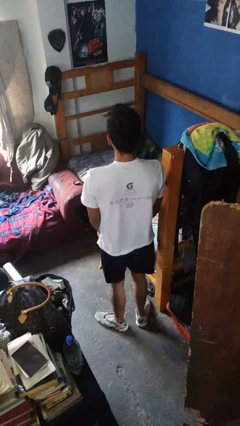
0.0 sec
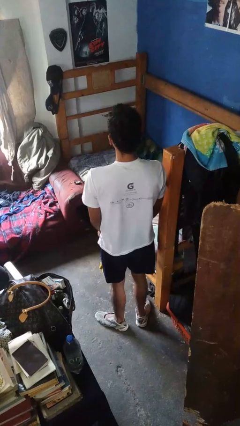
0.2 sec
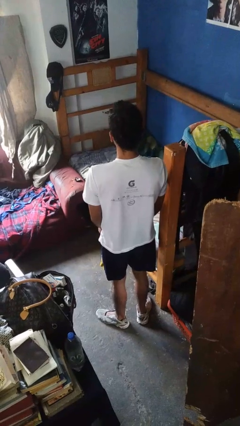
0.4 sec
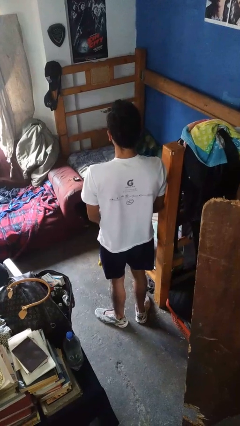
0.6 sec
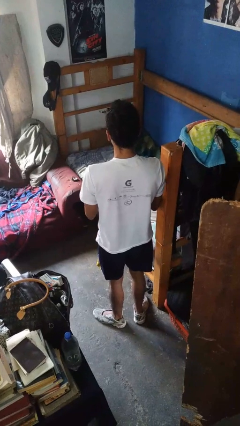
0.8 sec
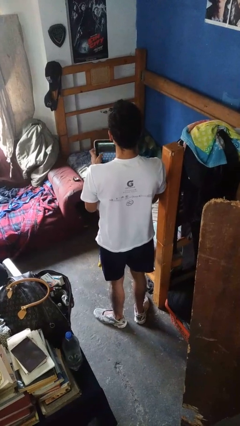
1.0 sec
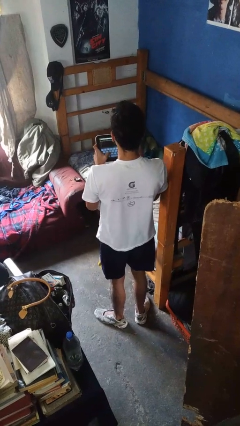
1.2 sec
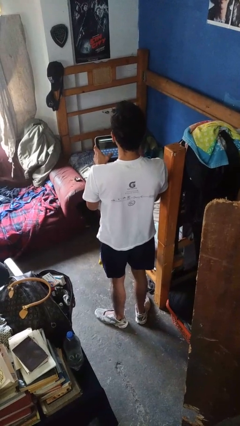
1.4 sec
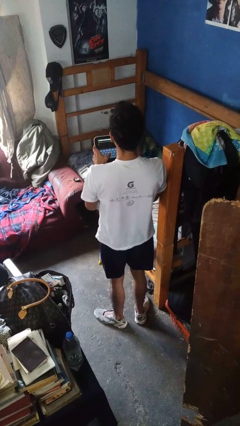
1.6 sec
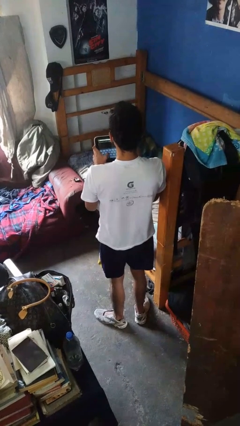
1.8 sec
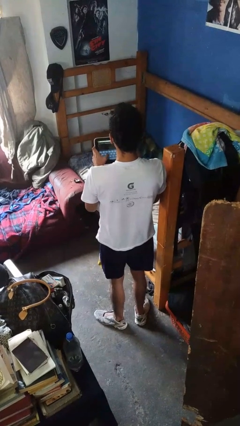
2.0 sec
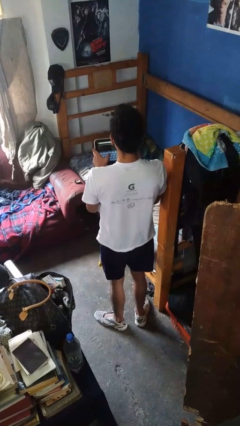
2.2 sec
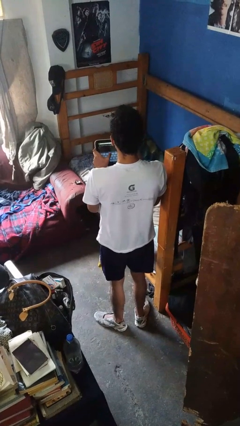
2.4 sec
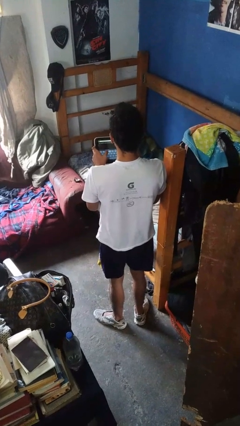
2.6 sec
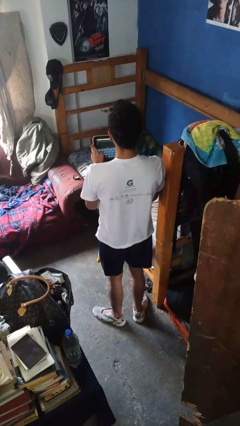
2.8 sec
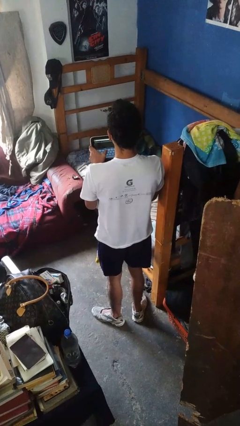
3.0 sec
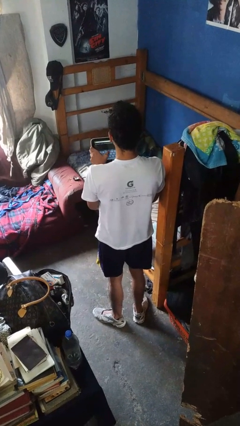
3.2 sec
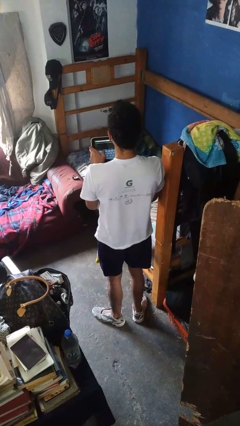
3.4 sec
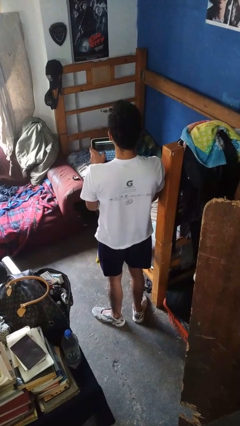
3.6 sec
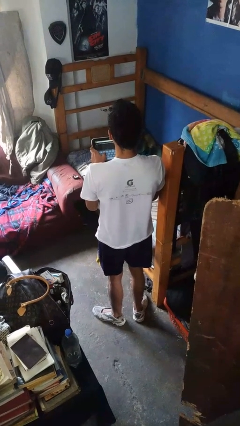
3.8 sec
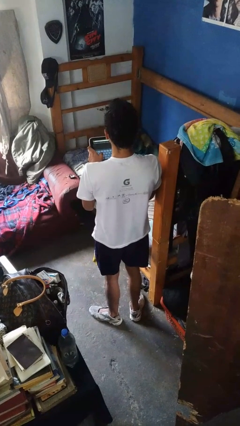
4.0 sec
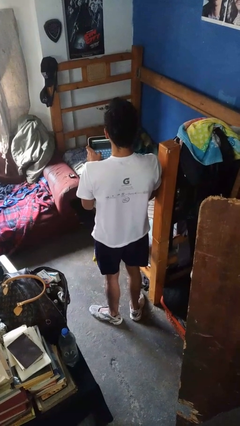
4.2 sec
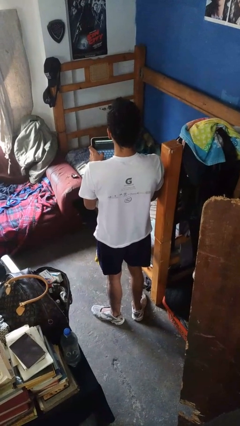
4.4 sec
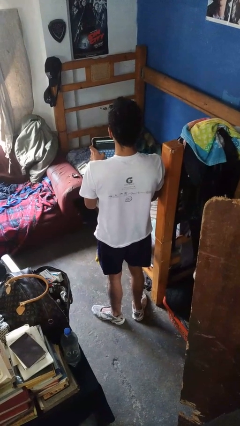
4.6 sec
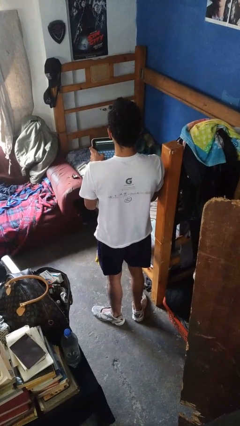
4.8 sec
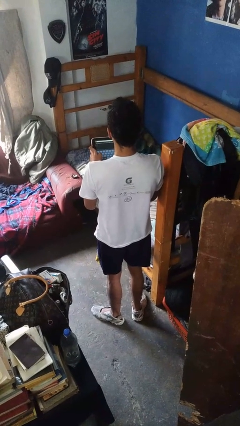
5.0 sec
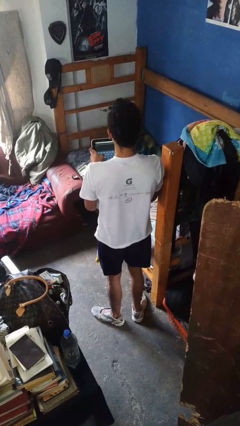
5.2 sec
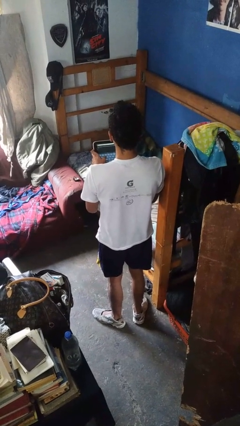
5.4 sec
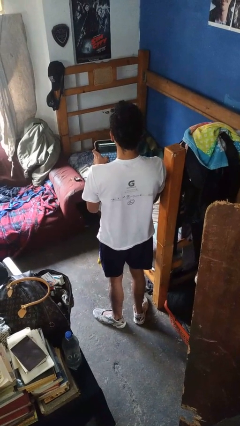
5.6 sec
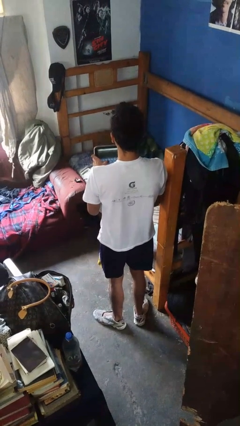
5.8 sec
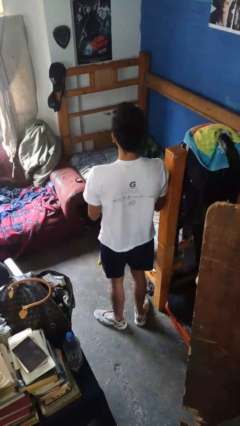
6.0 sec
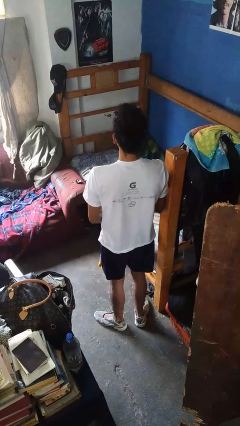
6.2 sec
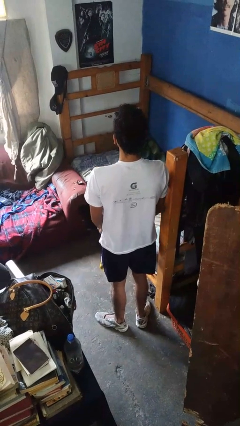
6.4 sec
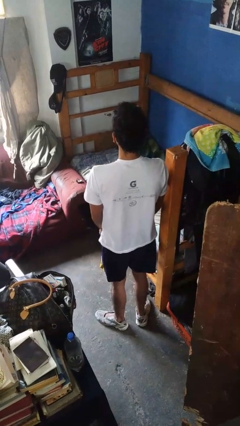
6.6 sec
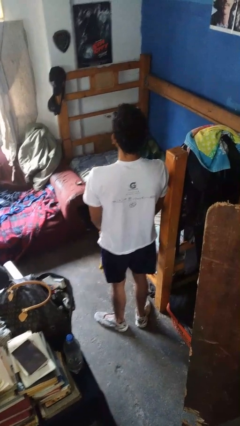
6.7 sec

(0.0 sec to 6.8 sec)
person interacts with tablet

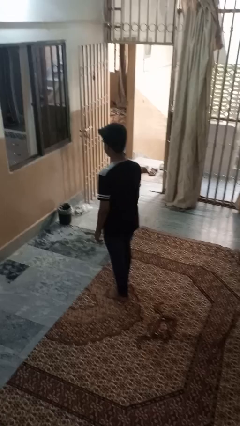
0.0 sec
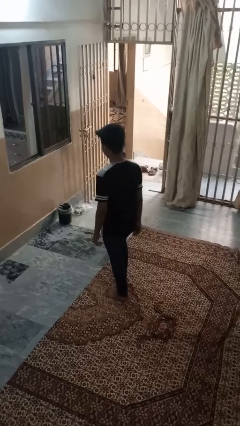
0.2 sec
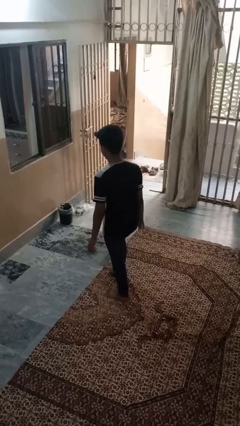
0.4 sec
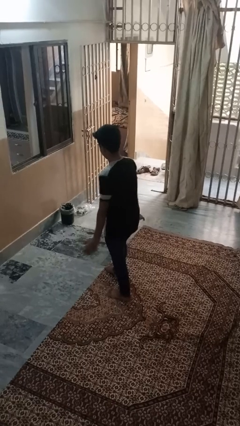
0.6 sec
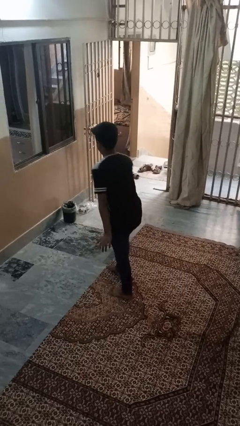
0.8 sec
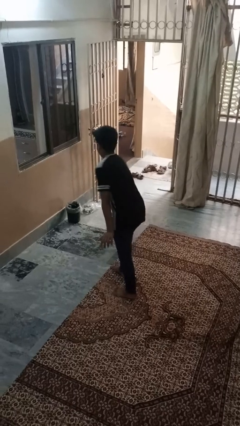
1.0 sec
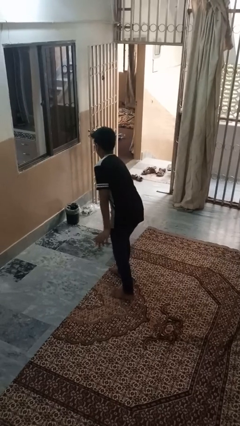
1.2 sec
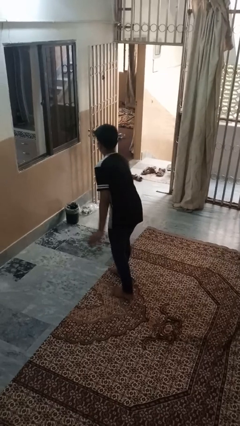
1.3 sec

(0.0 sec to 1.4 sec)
person dances in place

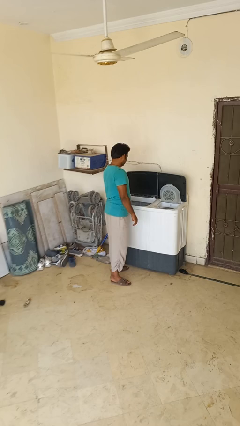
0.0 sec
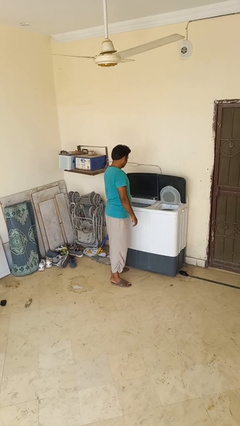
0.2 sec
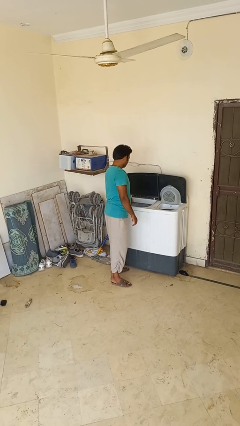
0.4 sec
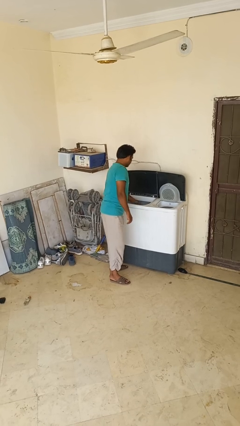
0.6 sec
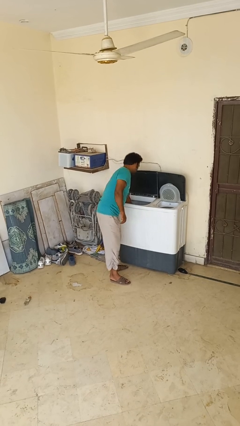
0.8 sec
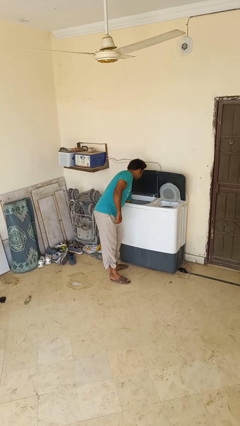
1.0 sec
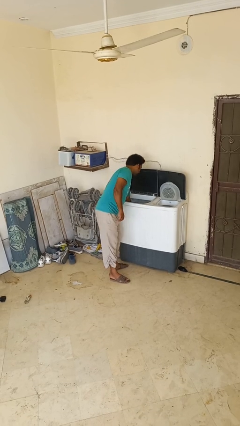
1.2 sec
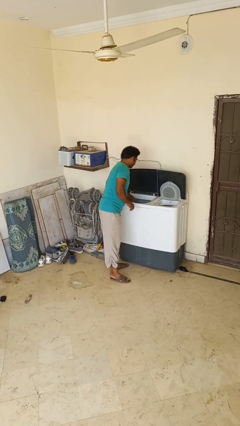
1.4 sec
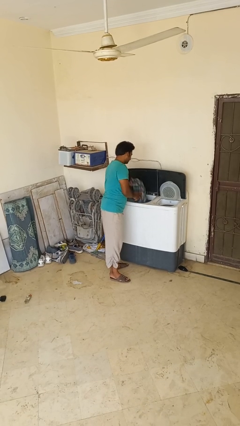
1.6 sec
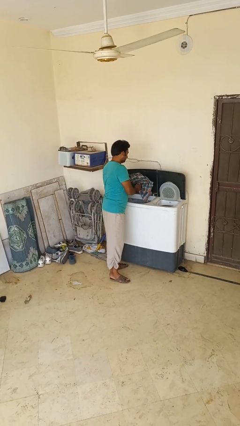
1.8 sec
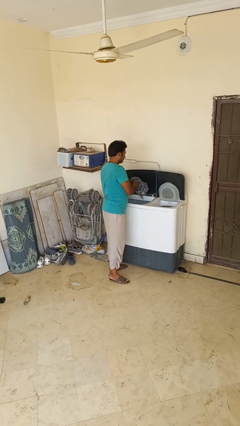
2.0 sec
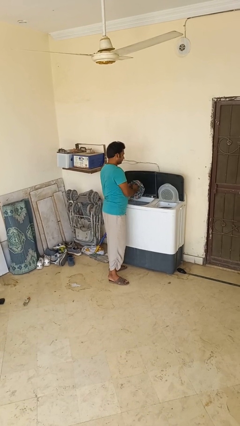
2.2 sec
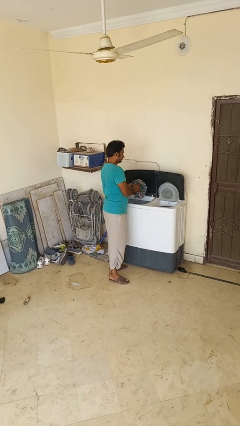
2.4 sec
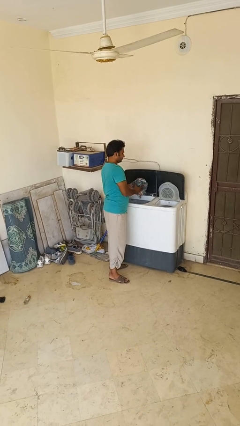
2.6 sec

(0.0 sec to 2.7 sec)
person unloads clotheswasher

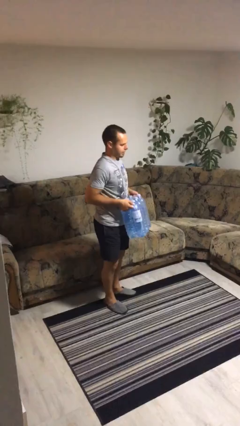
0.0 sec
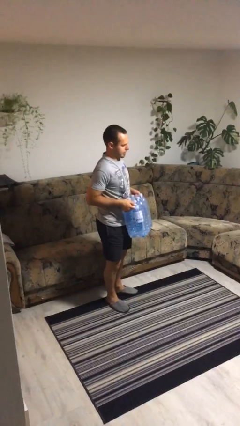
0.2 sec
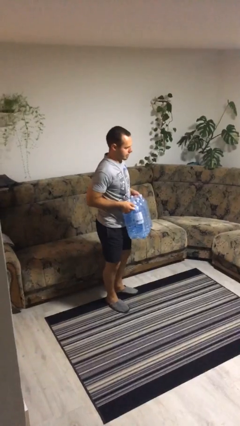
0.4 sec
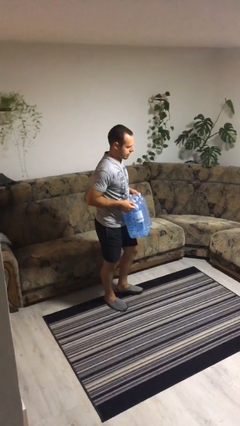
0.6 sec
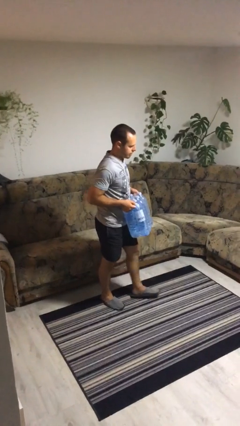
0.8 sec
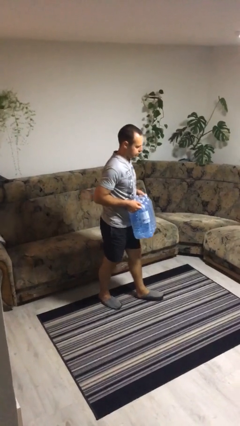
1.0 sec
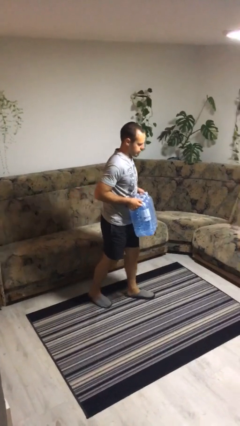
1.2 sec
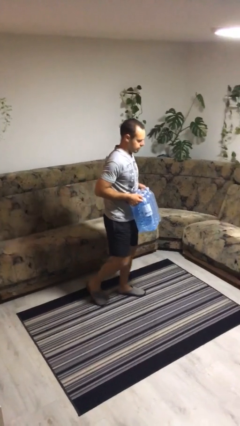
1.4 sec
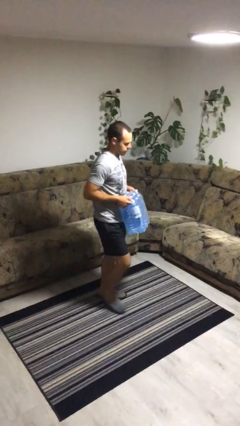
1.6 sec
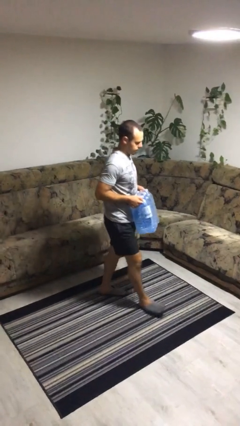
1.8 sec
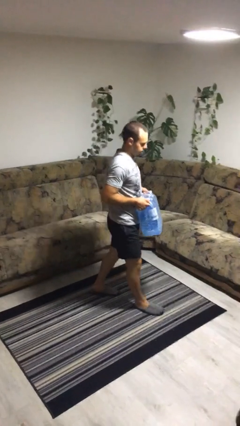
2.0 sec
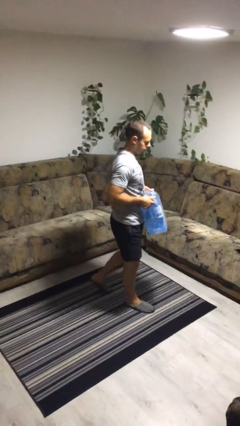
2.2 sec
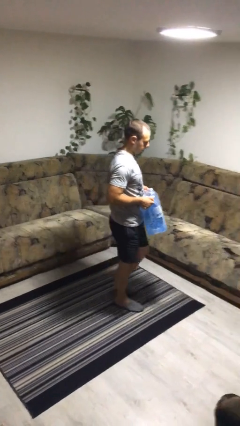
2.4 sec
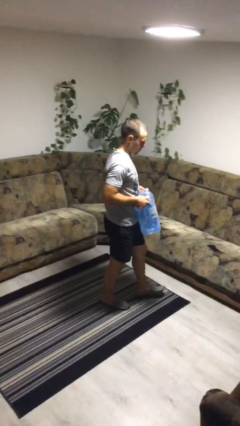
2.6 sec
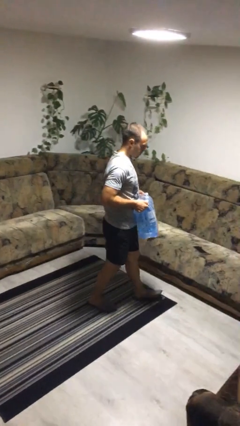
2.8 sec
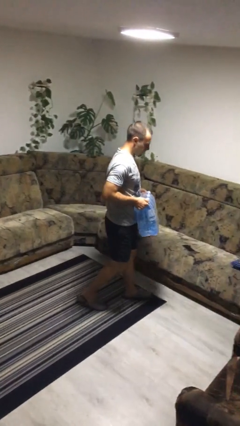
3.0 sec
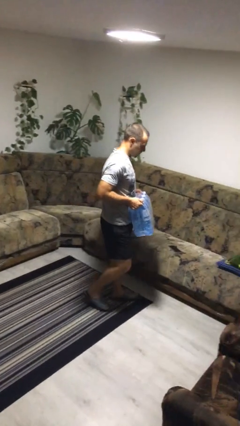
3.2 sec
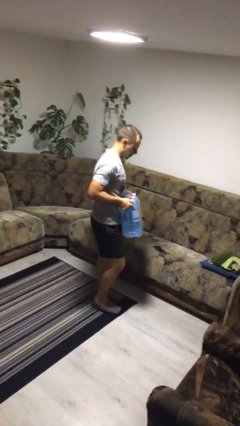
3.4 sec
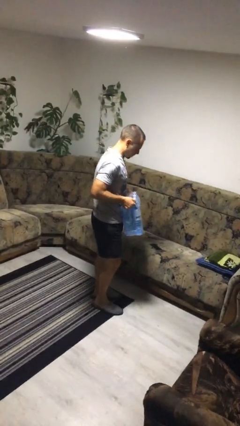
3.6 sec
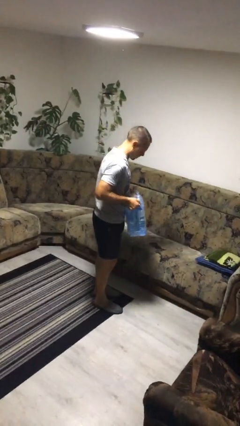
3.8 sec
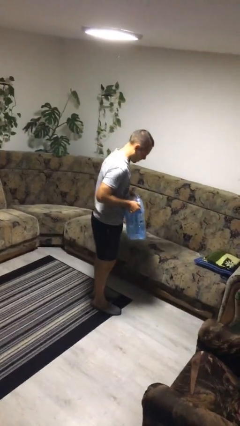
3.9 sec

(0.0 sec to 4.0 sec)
person carries heavy object

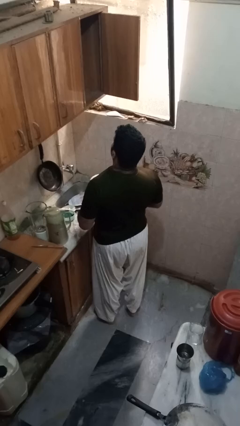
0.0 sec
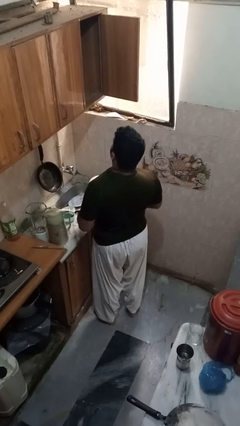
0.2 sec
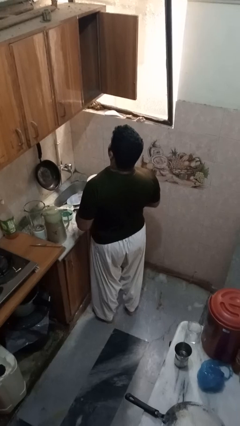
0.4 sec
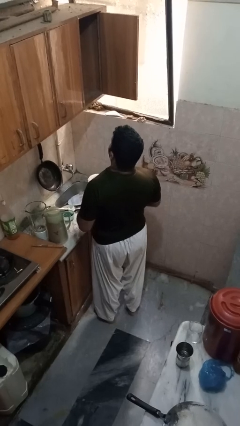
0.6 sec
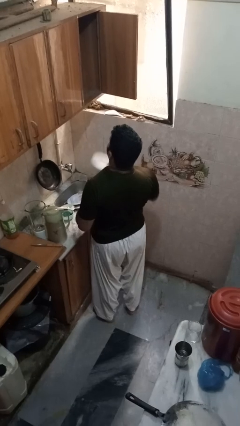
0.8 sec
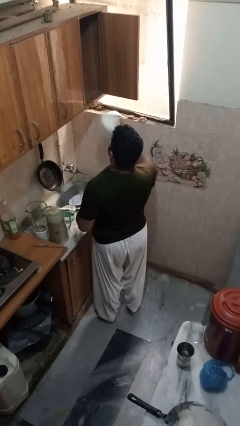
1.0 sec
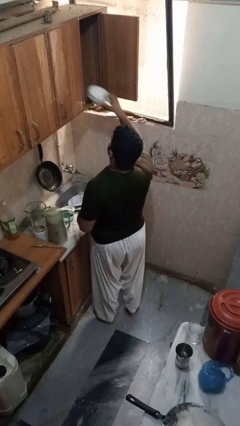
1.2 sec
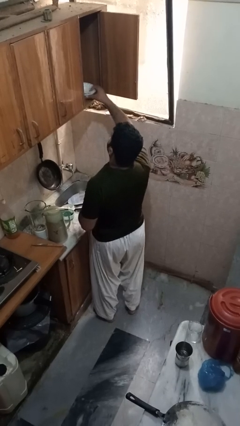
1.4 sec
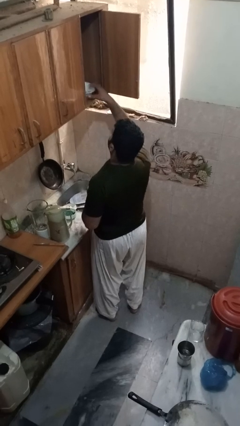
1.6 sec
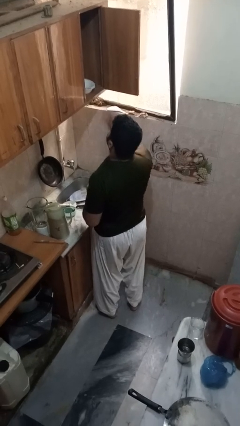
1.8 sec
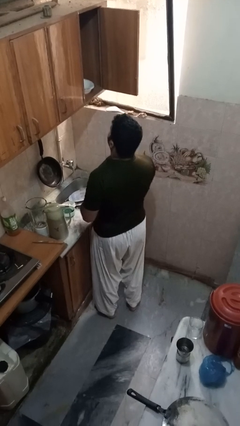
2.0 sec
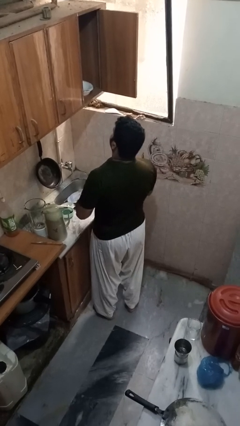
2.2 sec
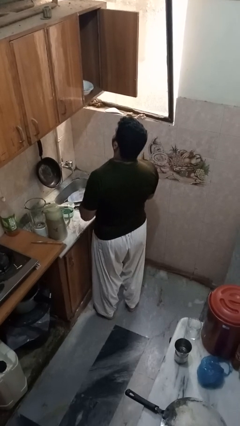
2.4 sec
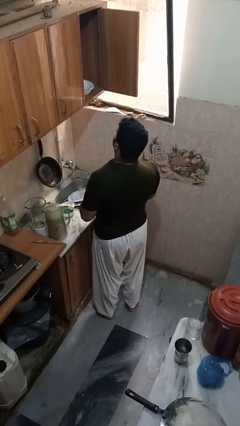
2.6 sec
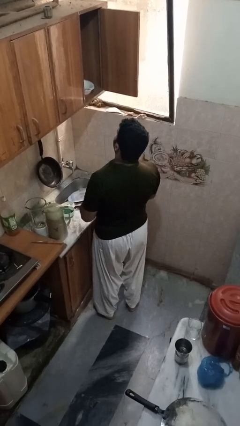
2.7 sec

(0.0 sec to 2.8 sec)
person puts object in cabinet
